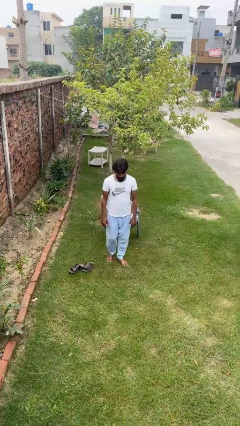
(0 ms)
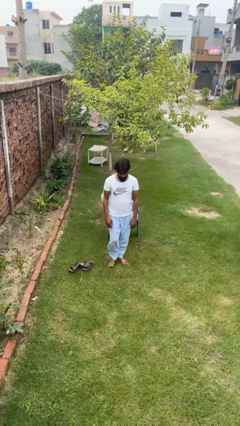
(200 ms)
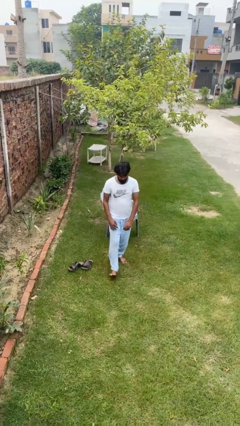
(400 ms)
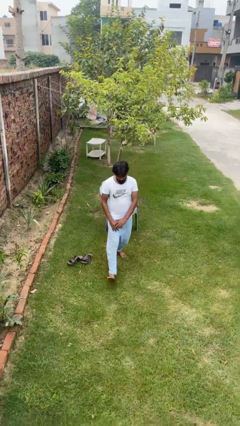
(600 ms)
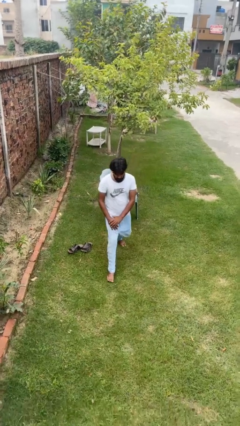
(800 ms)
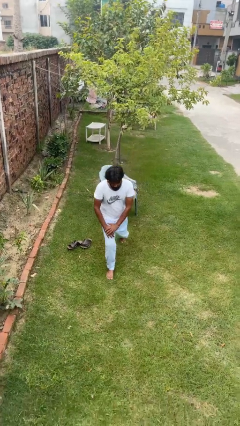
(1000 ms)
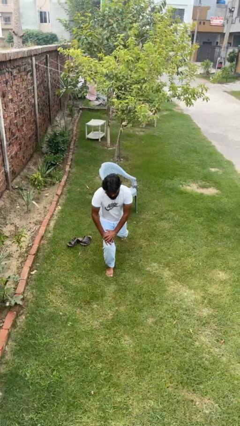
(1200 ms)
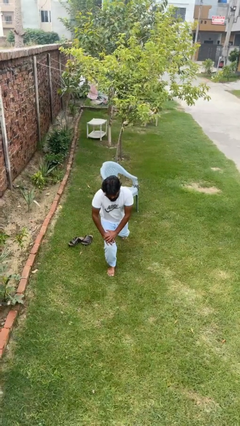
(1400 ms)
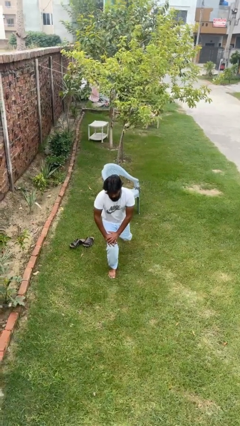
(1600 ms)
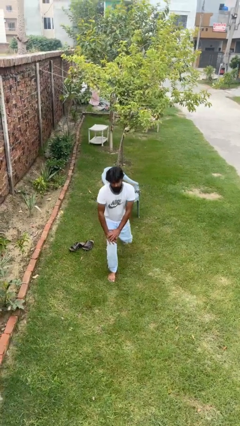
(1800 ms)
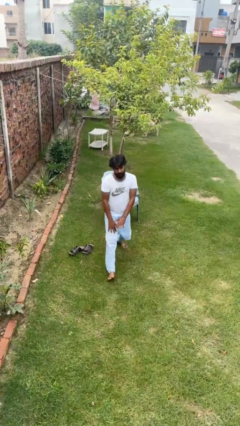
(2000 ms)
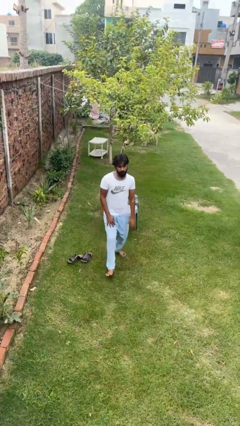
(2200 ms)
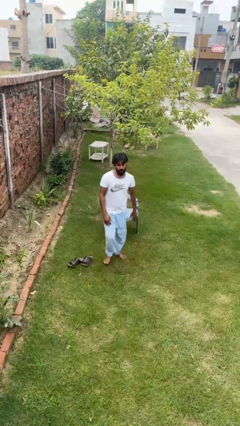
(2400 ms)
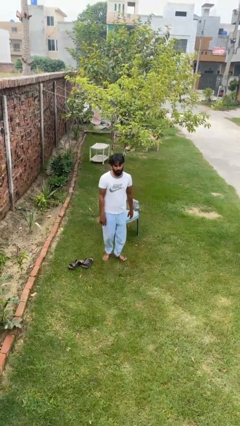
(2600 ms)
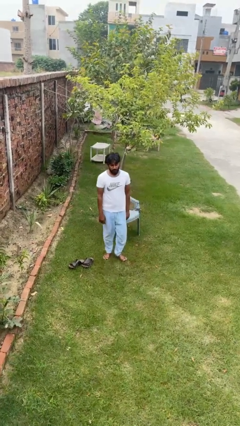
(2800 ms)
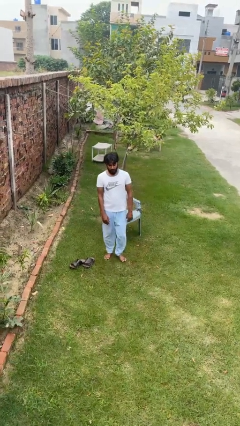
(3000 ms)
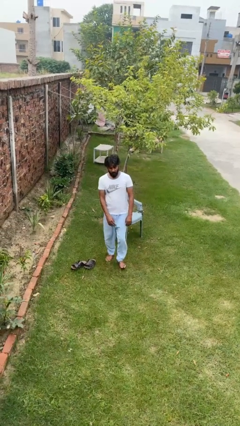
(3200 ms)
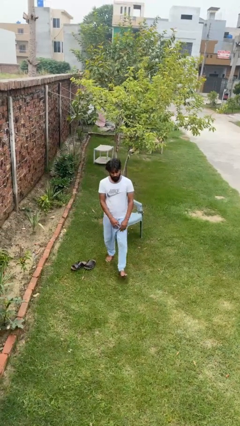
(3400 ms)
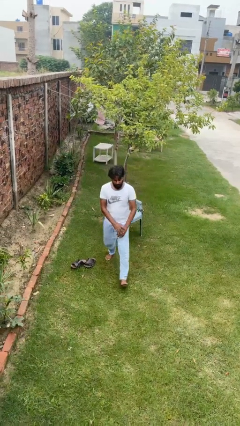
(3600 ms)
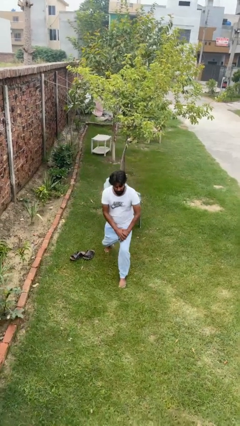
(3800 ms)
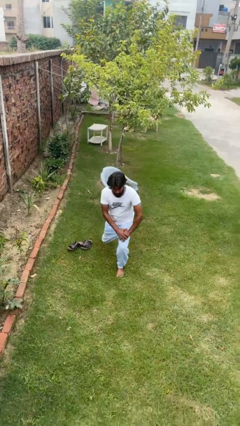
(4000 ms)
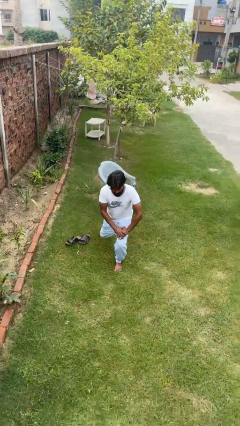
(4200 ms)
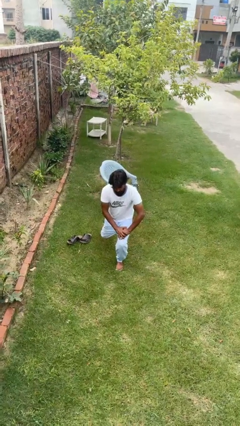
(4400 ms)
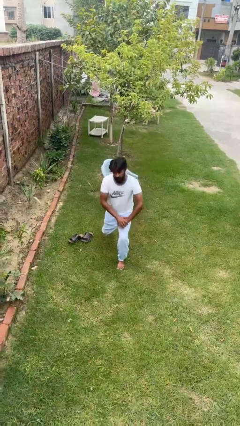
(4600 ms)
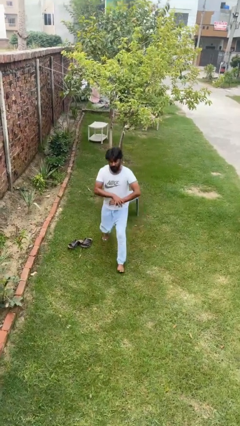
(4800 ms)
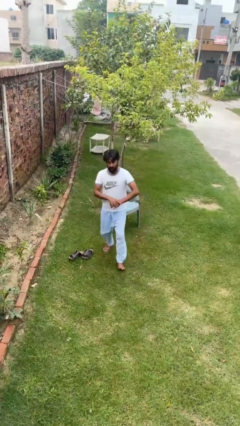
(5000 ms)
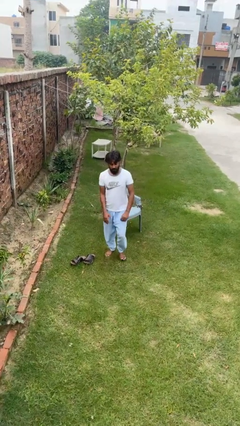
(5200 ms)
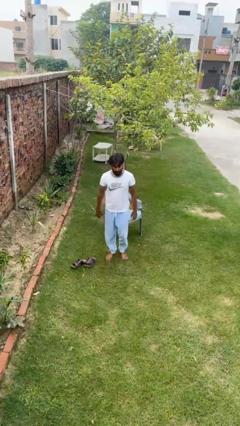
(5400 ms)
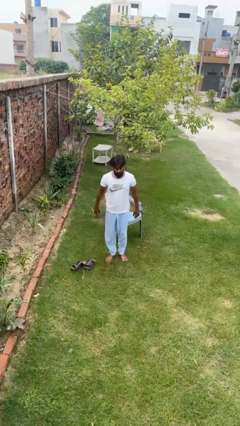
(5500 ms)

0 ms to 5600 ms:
person exercises with lunges

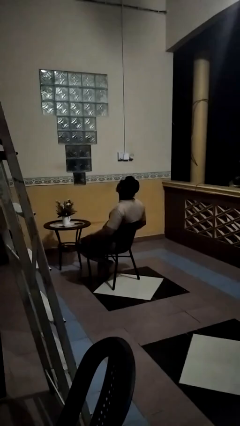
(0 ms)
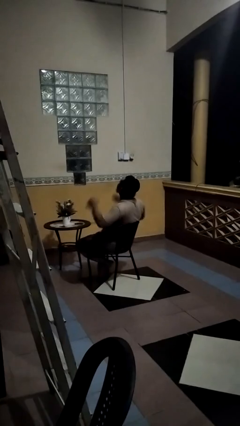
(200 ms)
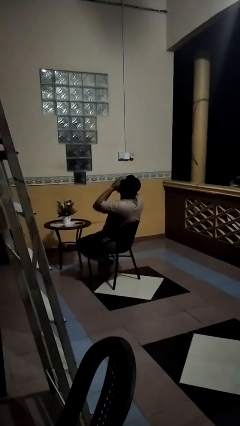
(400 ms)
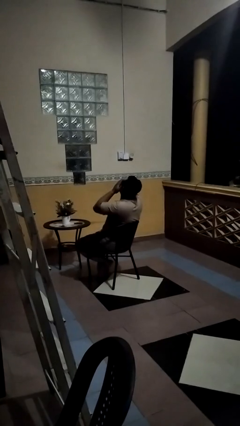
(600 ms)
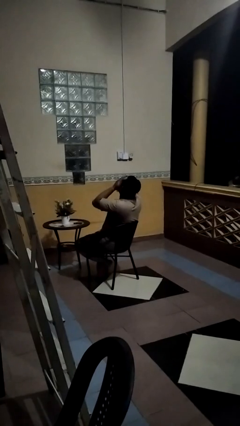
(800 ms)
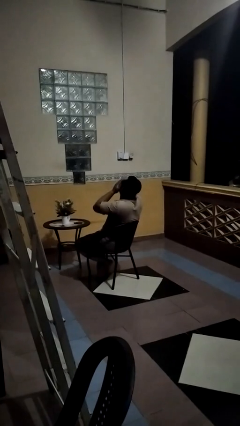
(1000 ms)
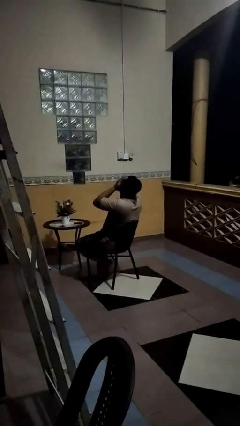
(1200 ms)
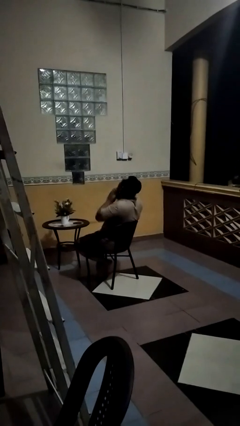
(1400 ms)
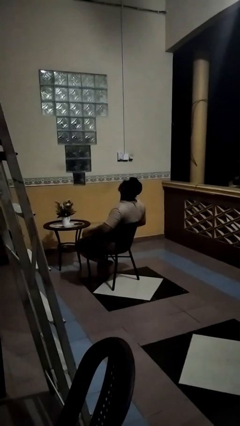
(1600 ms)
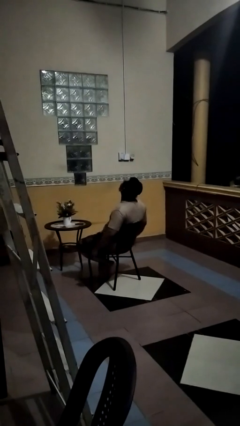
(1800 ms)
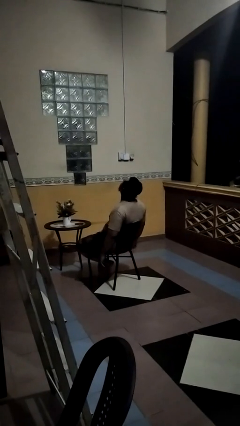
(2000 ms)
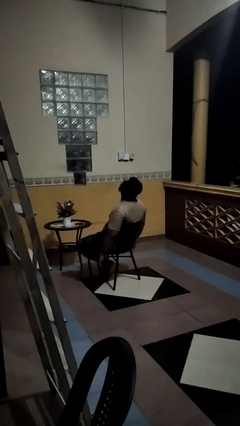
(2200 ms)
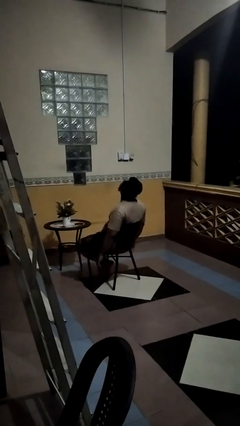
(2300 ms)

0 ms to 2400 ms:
person covers face with hands

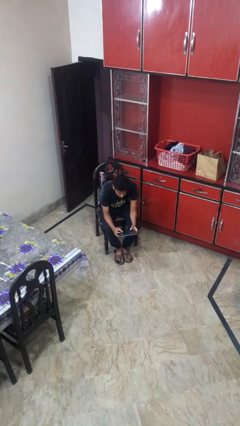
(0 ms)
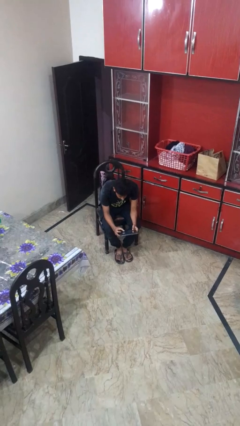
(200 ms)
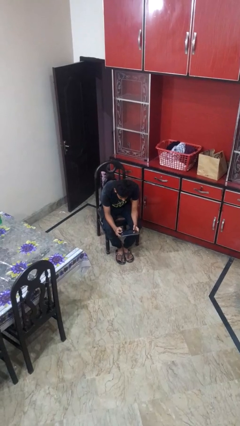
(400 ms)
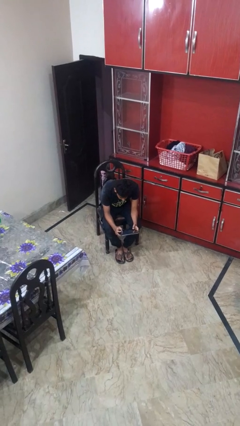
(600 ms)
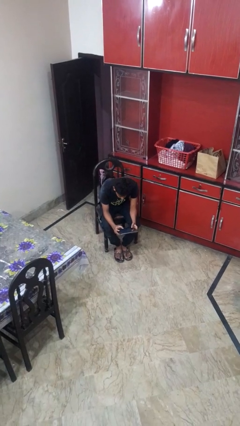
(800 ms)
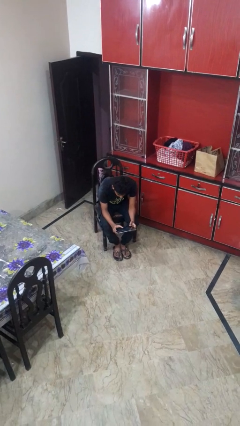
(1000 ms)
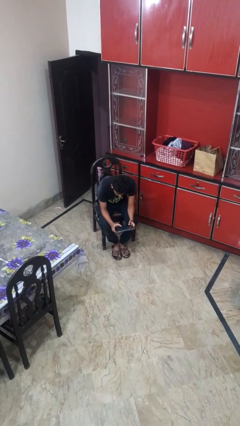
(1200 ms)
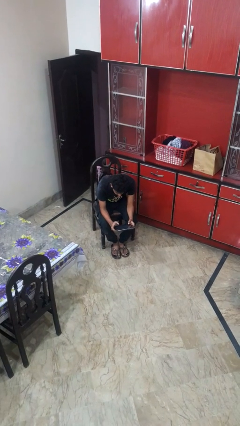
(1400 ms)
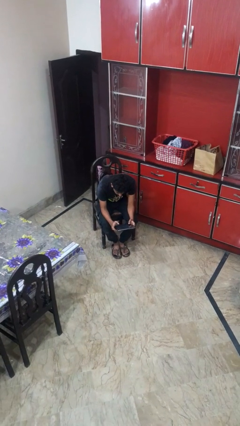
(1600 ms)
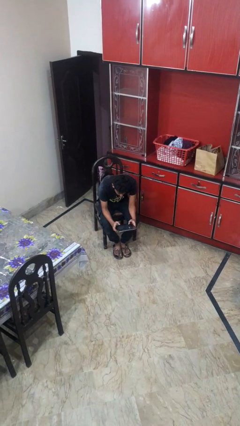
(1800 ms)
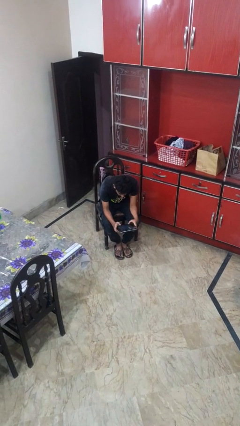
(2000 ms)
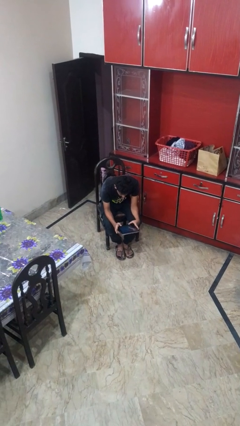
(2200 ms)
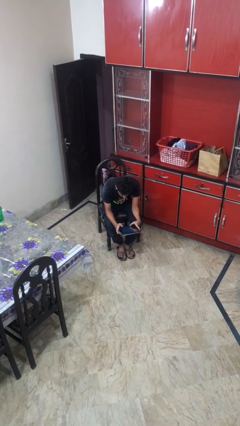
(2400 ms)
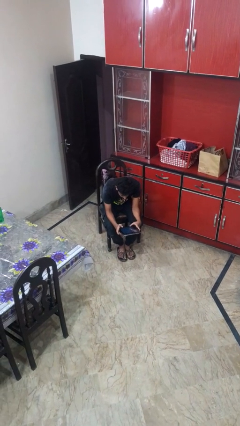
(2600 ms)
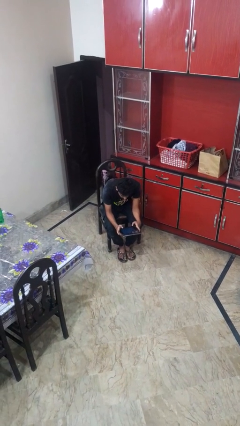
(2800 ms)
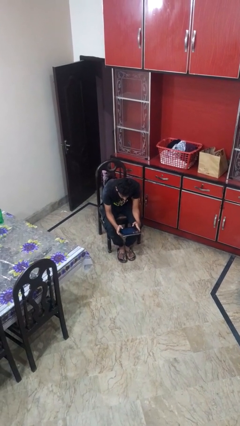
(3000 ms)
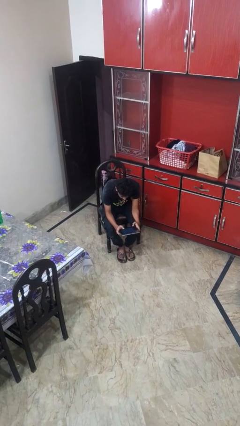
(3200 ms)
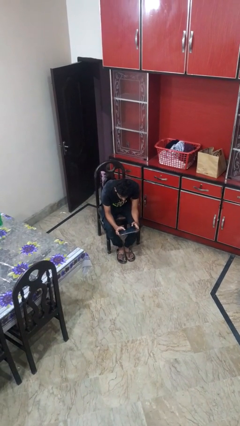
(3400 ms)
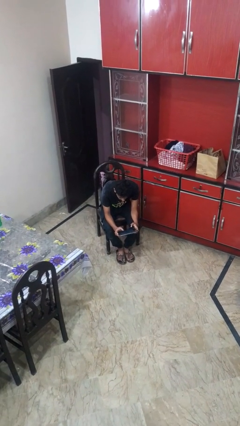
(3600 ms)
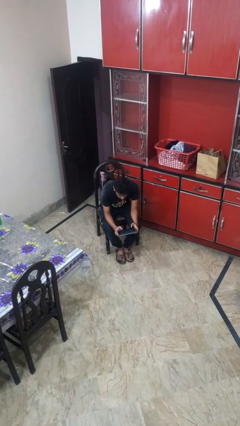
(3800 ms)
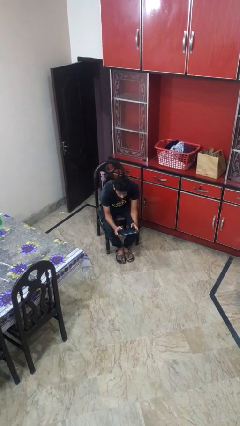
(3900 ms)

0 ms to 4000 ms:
person interacts with tablet

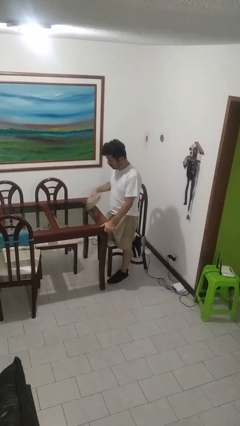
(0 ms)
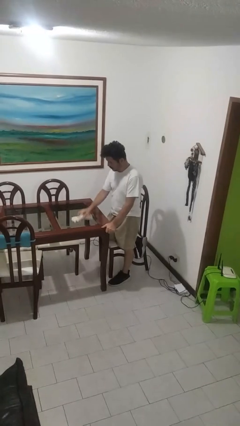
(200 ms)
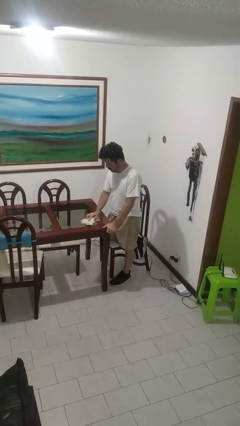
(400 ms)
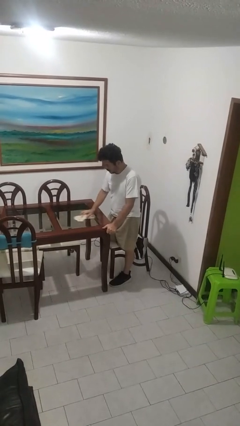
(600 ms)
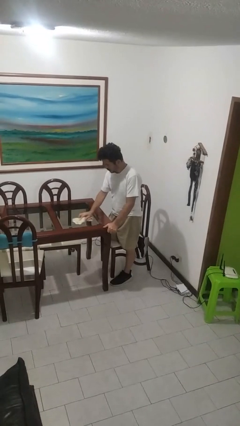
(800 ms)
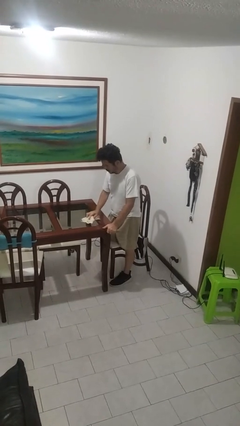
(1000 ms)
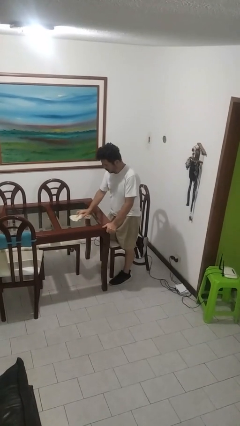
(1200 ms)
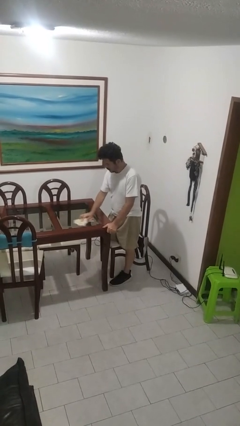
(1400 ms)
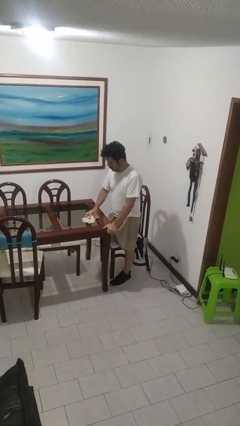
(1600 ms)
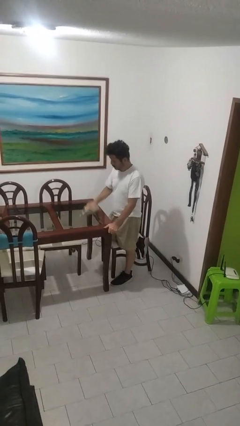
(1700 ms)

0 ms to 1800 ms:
person cleans table with rag

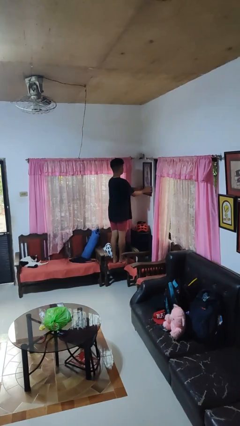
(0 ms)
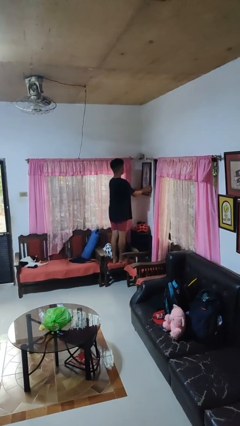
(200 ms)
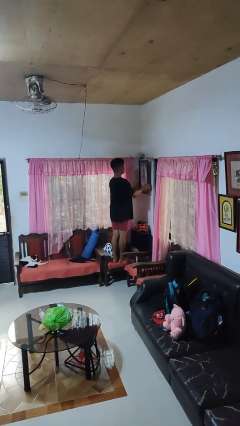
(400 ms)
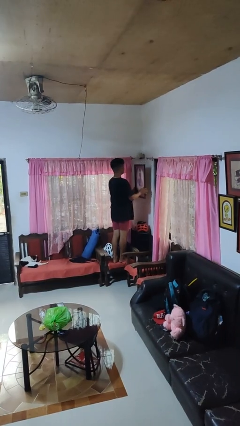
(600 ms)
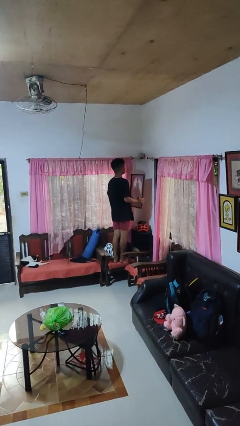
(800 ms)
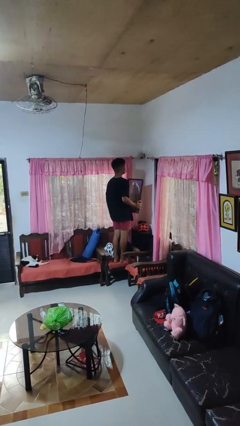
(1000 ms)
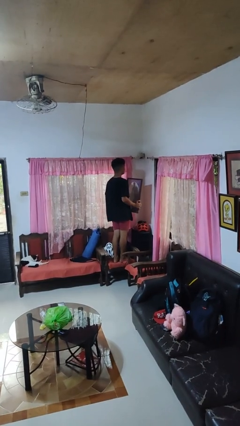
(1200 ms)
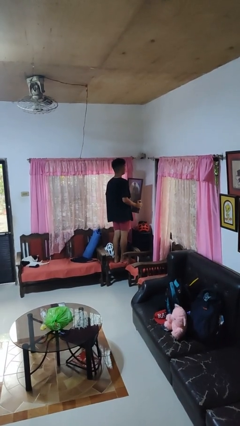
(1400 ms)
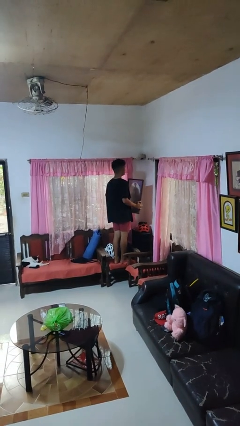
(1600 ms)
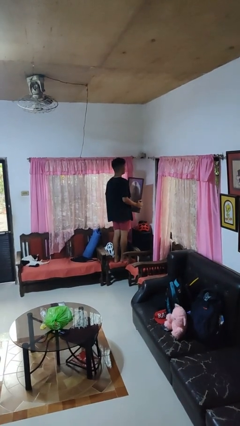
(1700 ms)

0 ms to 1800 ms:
person takes down picture frame

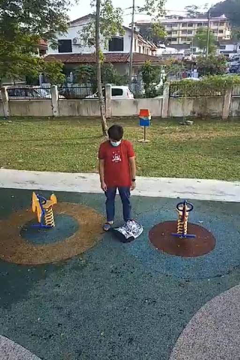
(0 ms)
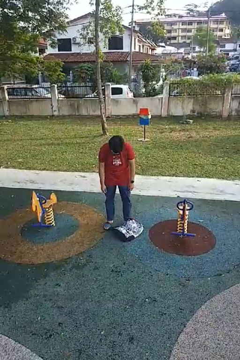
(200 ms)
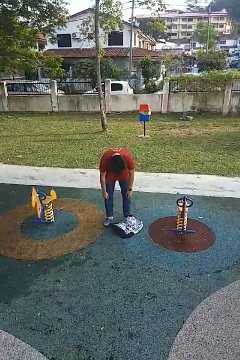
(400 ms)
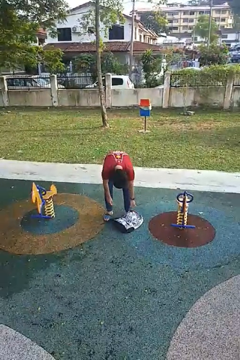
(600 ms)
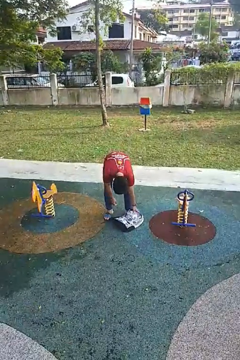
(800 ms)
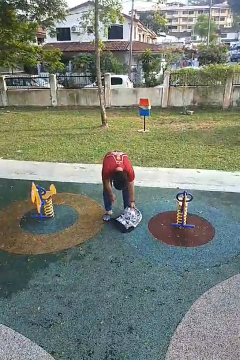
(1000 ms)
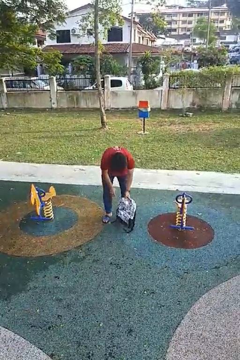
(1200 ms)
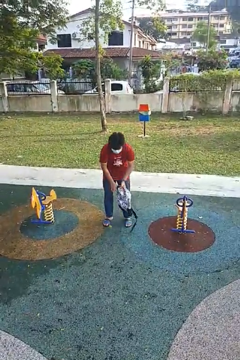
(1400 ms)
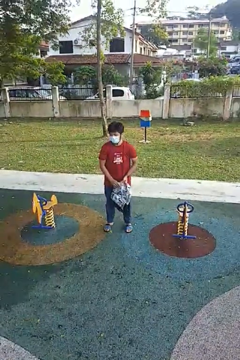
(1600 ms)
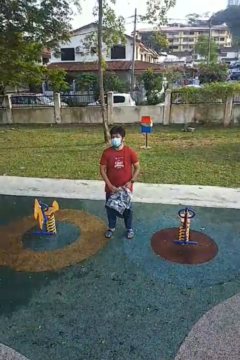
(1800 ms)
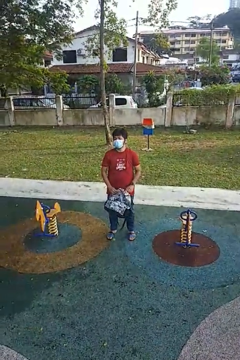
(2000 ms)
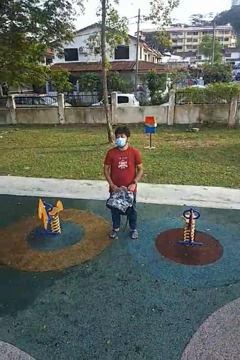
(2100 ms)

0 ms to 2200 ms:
person picks up object from floor
